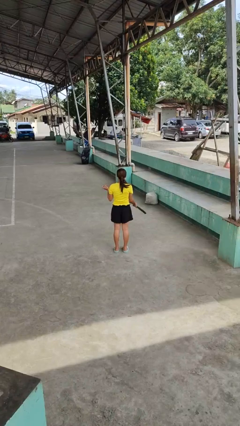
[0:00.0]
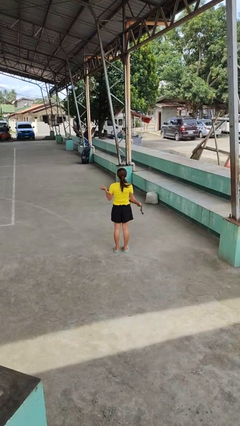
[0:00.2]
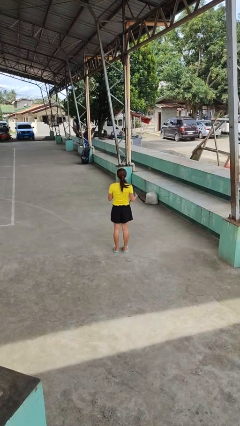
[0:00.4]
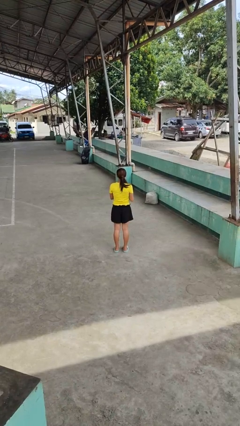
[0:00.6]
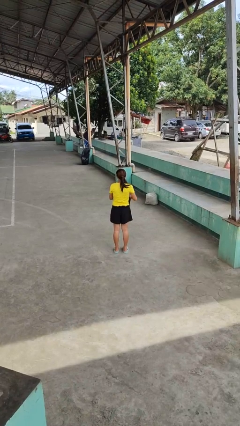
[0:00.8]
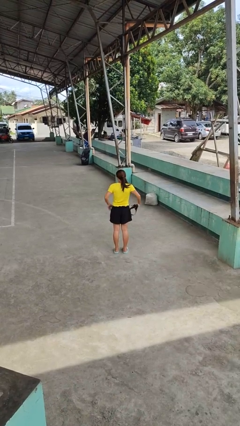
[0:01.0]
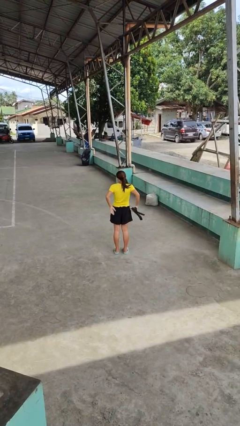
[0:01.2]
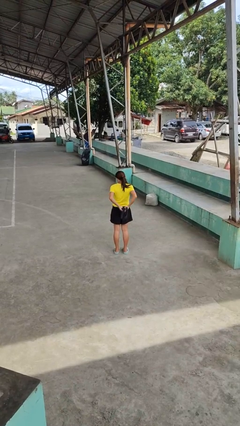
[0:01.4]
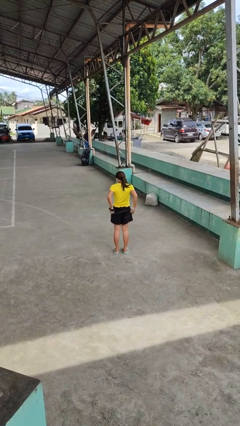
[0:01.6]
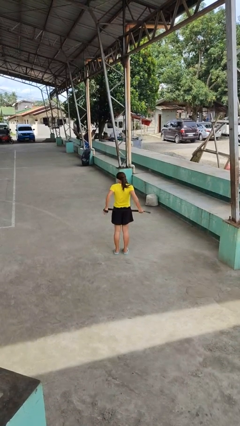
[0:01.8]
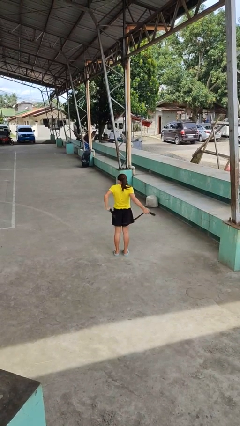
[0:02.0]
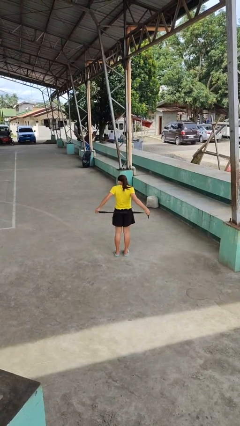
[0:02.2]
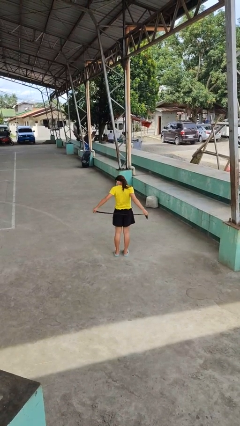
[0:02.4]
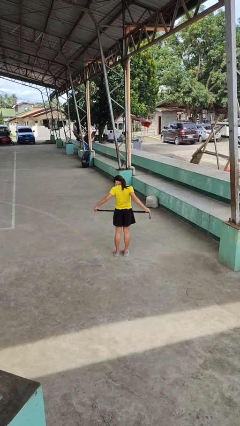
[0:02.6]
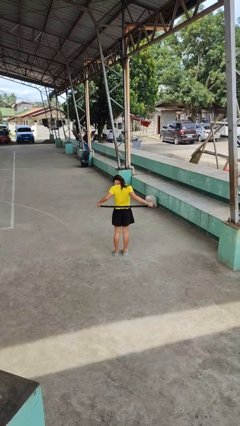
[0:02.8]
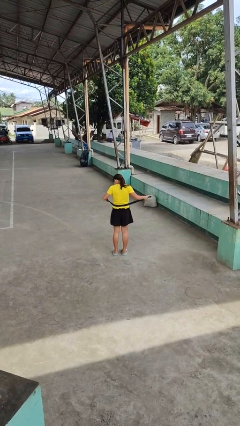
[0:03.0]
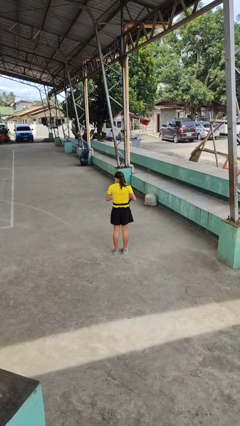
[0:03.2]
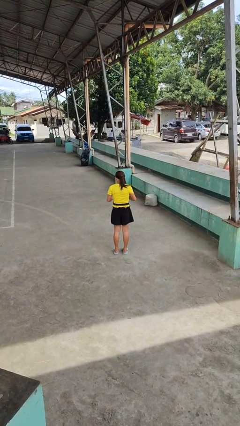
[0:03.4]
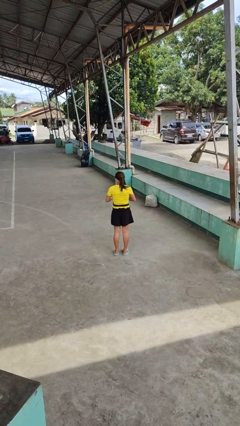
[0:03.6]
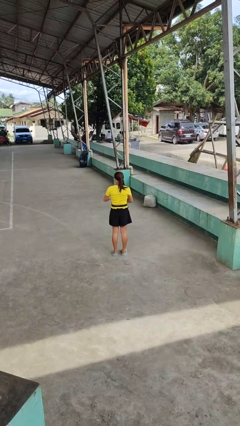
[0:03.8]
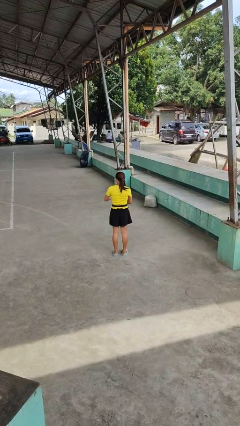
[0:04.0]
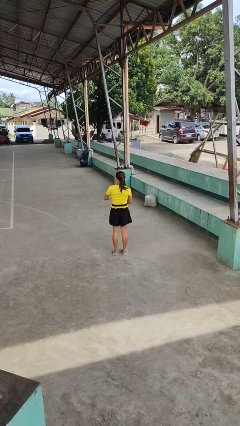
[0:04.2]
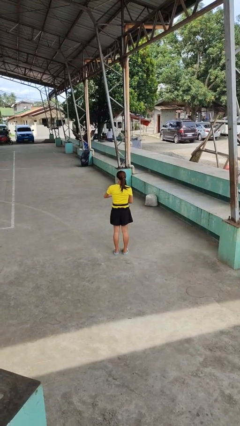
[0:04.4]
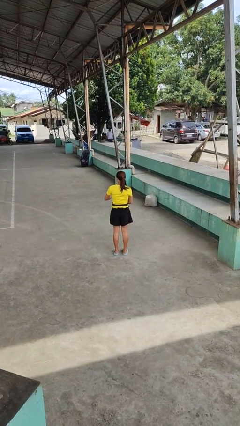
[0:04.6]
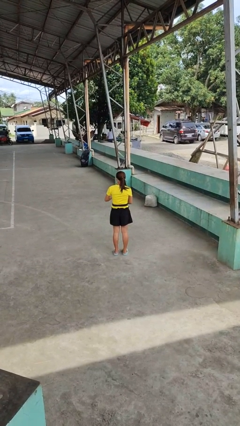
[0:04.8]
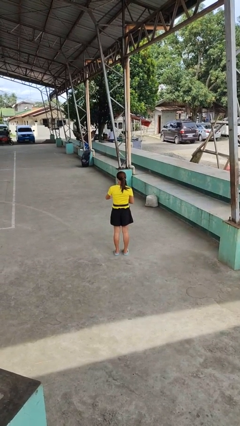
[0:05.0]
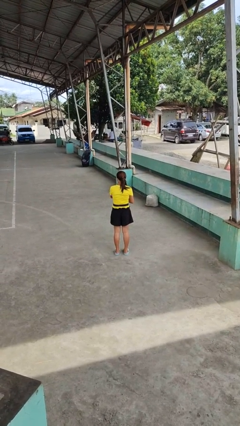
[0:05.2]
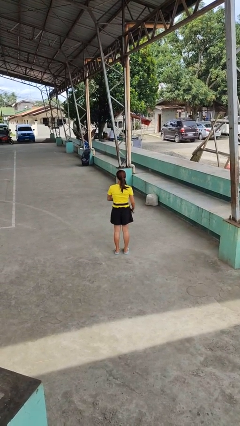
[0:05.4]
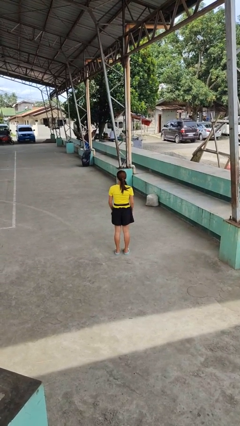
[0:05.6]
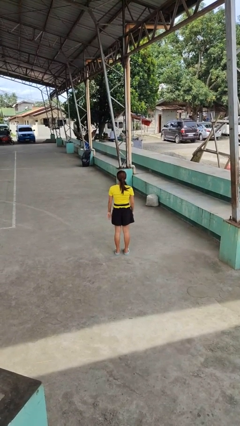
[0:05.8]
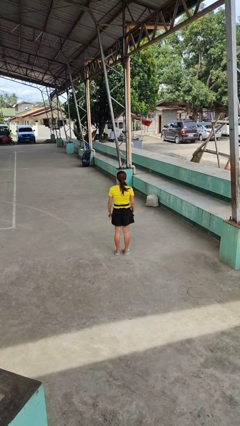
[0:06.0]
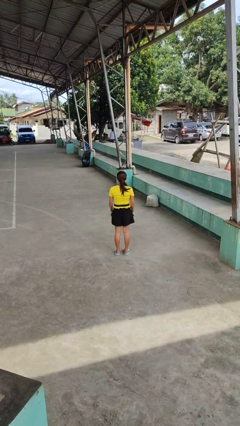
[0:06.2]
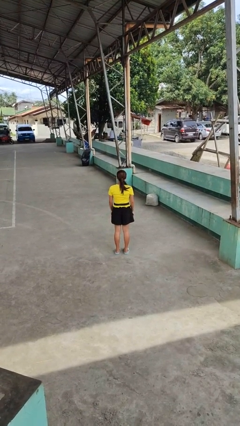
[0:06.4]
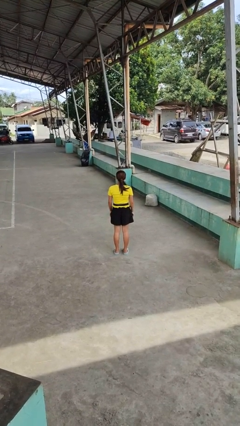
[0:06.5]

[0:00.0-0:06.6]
person puts on belt

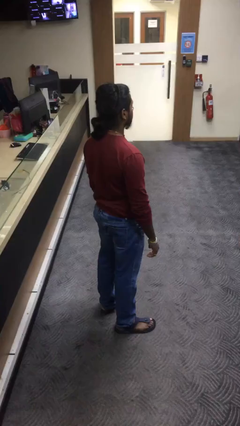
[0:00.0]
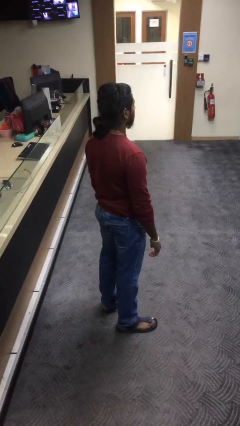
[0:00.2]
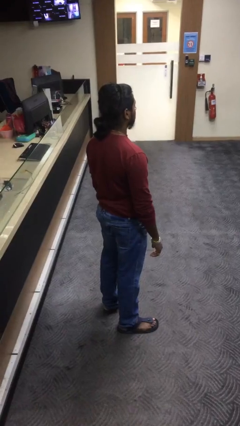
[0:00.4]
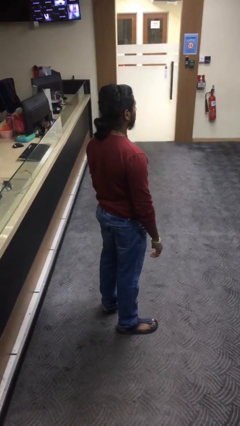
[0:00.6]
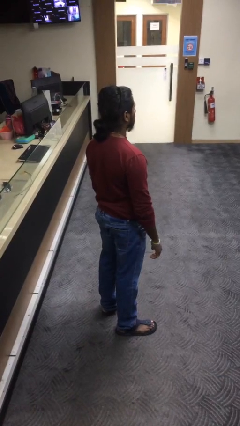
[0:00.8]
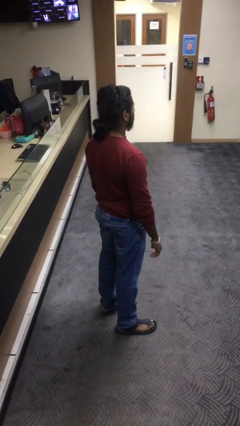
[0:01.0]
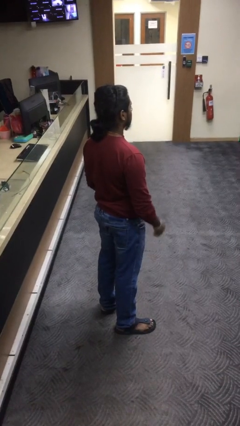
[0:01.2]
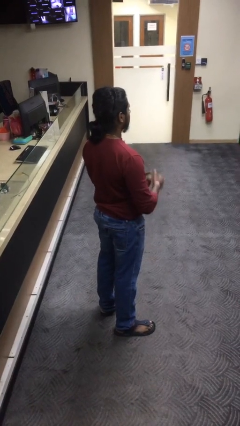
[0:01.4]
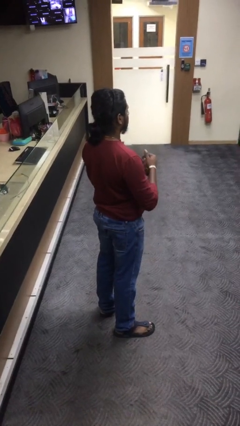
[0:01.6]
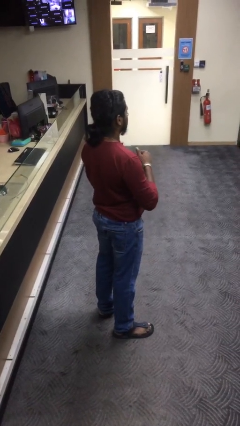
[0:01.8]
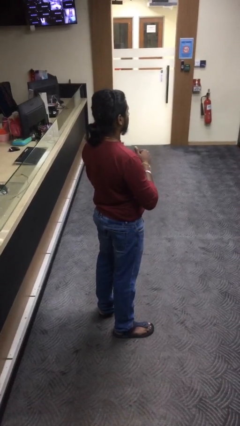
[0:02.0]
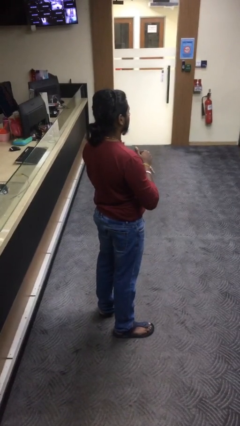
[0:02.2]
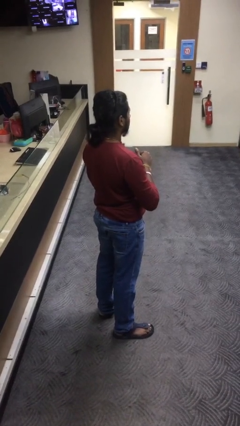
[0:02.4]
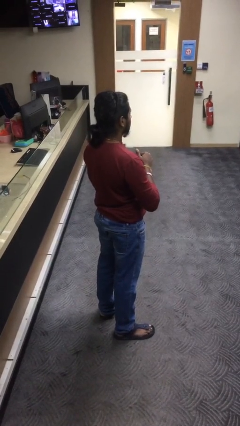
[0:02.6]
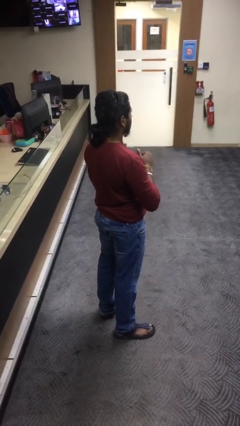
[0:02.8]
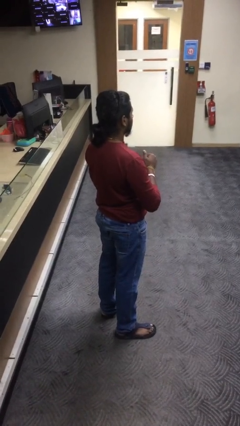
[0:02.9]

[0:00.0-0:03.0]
person cracks knuckles

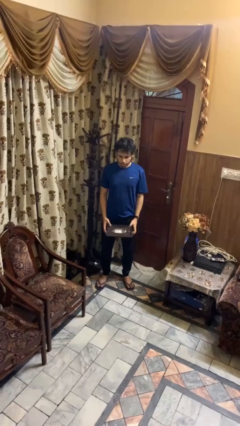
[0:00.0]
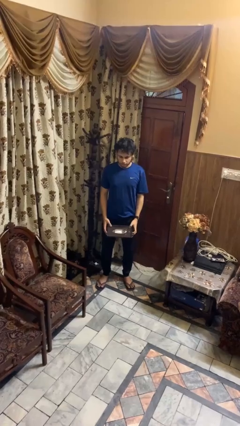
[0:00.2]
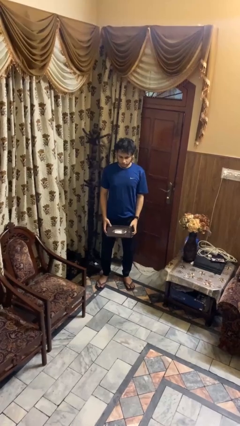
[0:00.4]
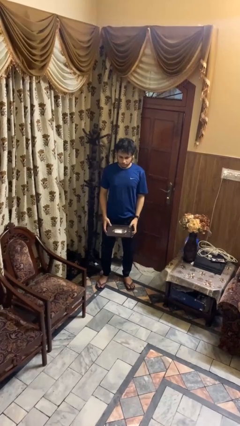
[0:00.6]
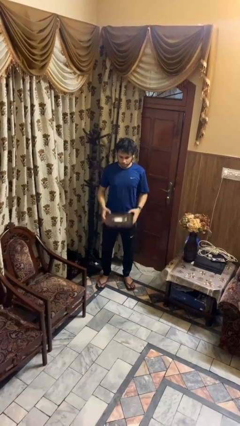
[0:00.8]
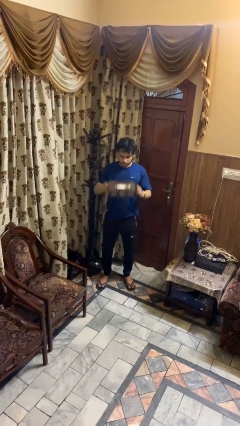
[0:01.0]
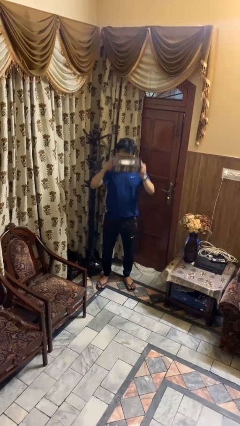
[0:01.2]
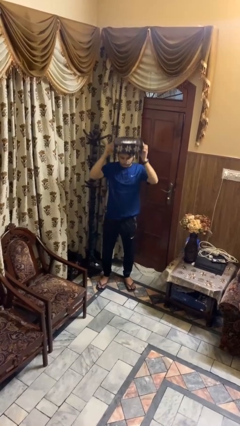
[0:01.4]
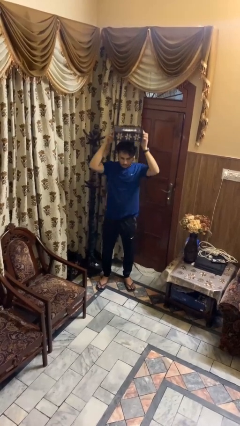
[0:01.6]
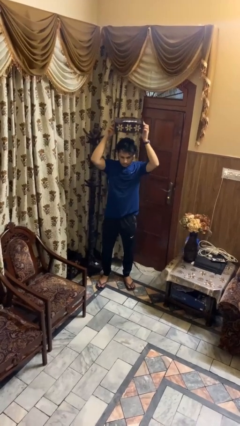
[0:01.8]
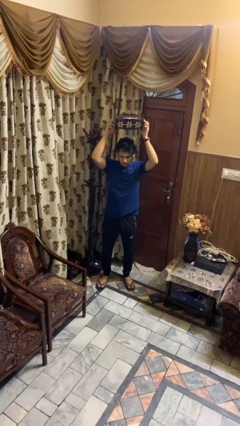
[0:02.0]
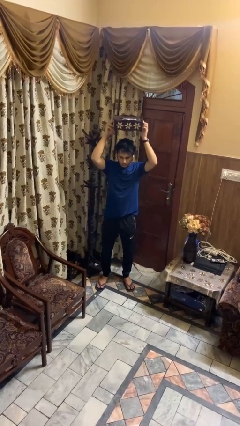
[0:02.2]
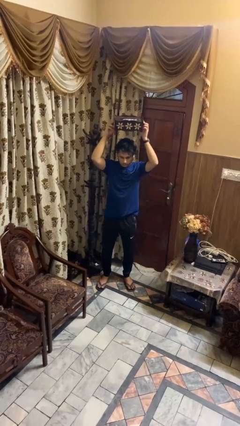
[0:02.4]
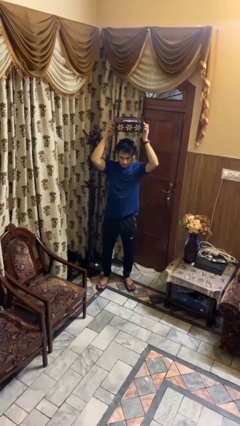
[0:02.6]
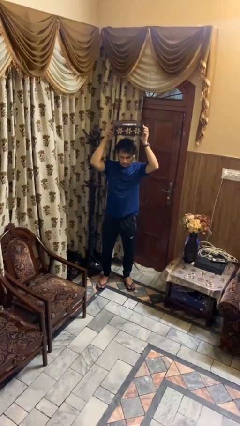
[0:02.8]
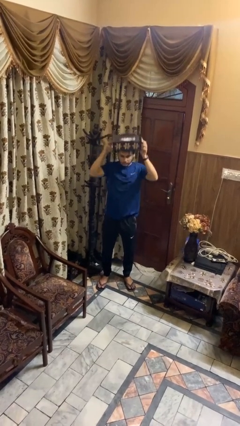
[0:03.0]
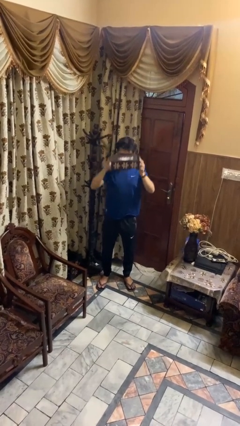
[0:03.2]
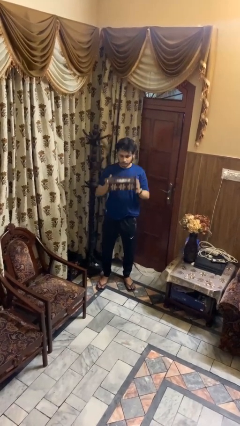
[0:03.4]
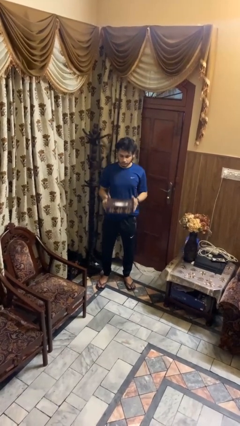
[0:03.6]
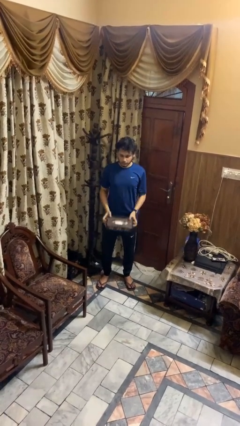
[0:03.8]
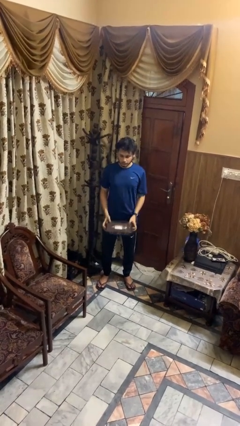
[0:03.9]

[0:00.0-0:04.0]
person holds object above head

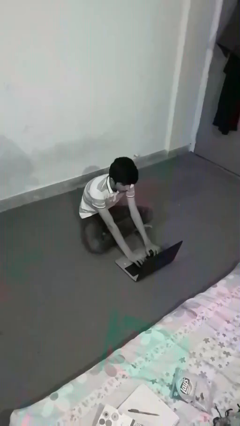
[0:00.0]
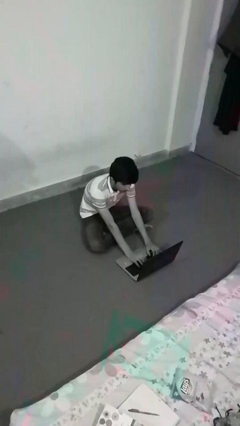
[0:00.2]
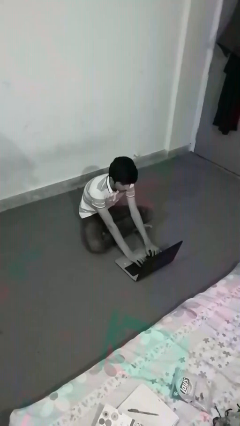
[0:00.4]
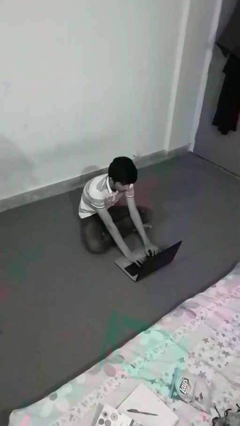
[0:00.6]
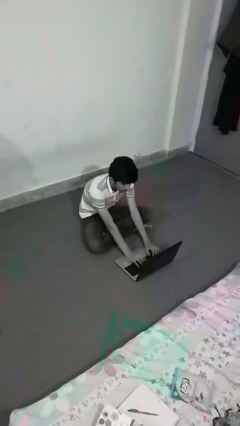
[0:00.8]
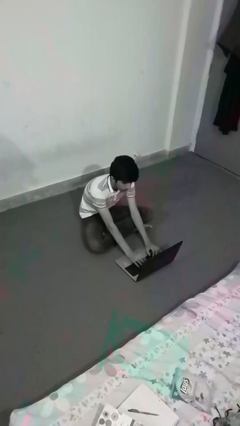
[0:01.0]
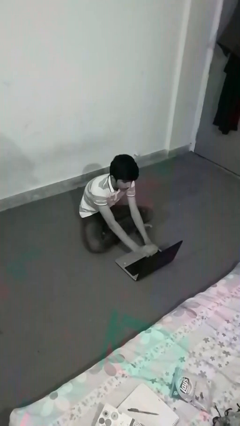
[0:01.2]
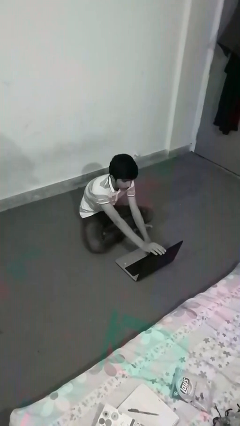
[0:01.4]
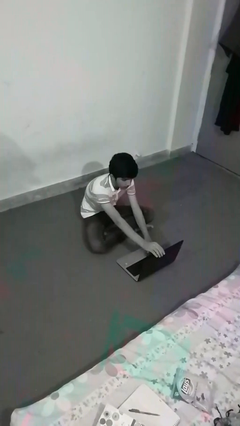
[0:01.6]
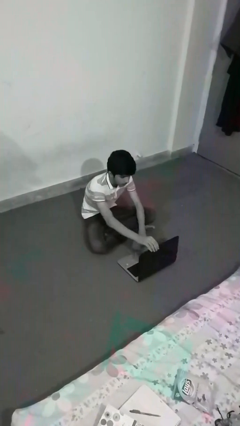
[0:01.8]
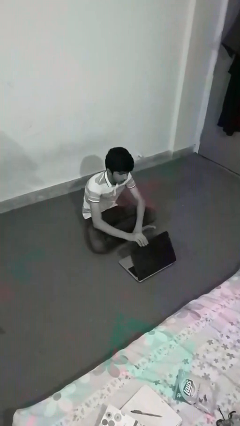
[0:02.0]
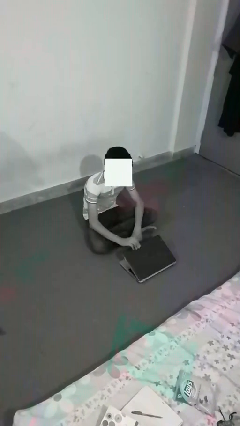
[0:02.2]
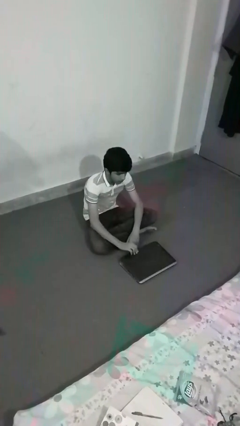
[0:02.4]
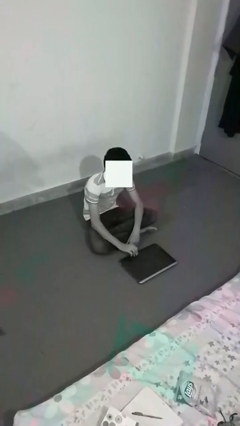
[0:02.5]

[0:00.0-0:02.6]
person interacts with laptop

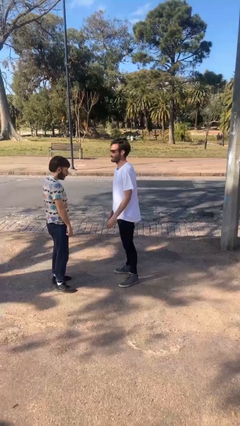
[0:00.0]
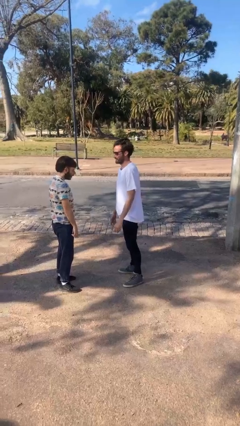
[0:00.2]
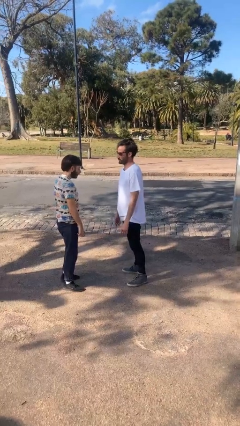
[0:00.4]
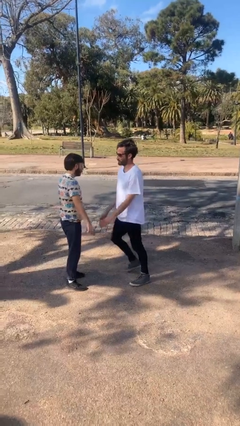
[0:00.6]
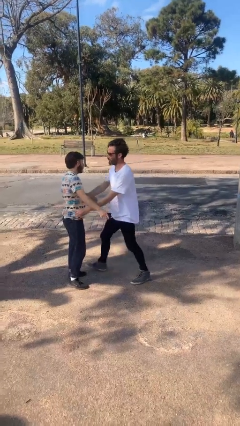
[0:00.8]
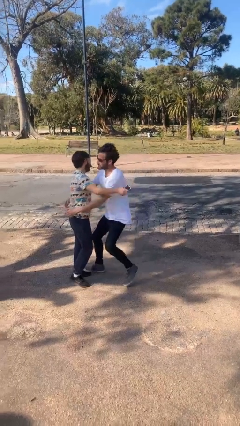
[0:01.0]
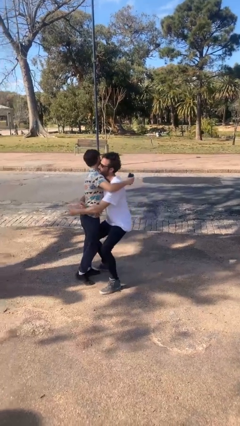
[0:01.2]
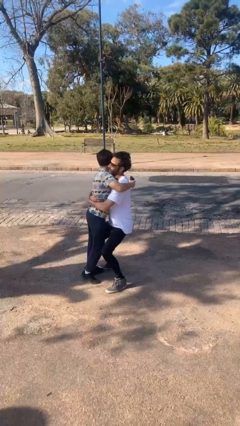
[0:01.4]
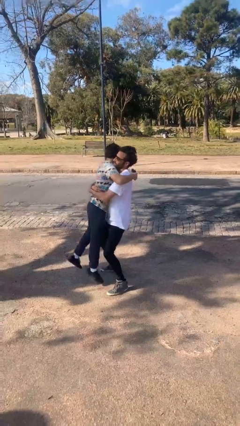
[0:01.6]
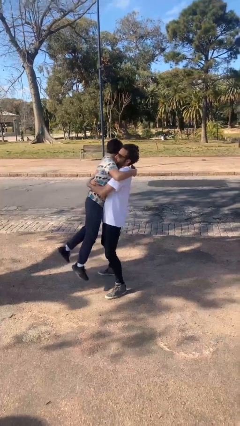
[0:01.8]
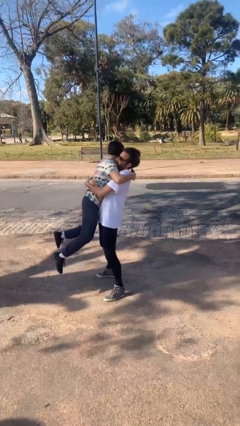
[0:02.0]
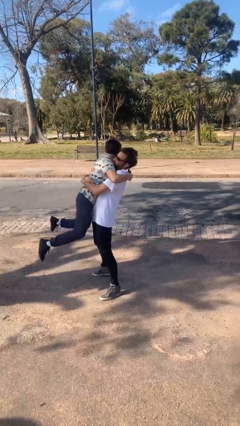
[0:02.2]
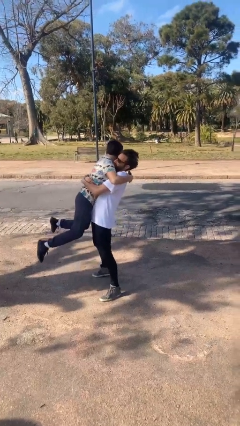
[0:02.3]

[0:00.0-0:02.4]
person picks up person
